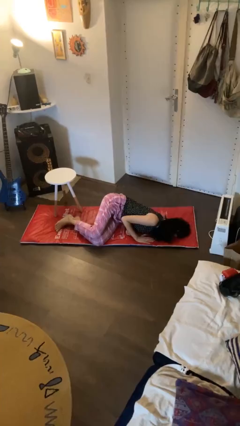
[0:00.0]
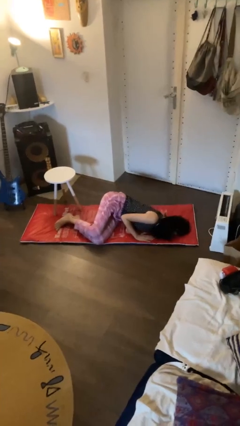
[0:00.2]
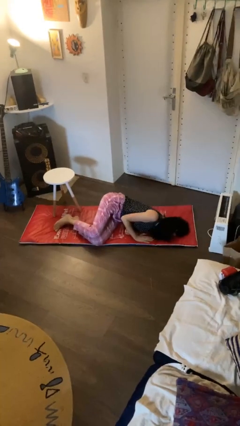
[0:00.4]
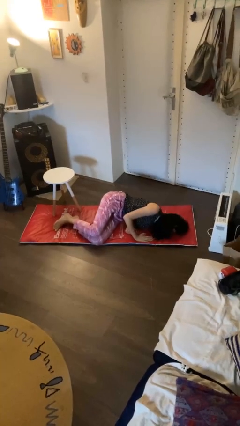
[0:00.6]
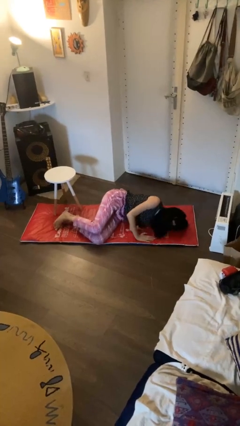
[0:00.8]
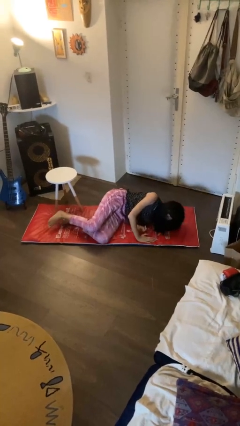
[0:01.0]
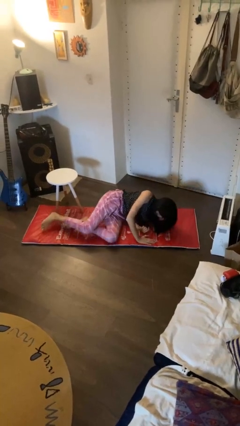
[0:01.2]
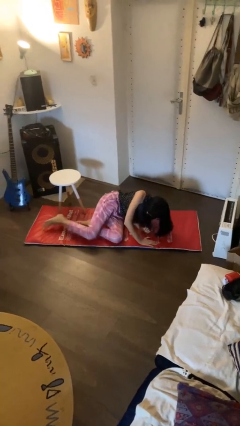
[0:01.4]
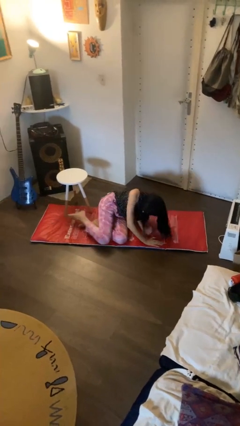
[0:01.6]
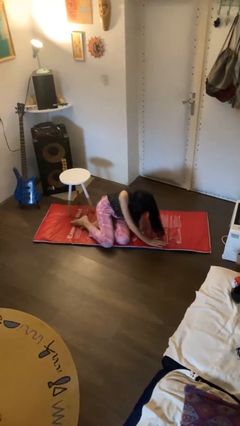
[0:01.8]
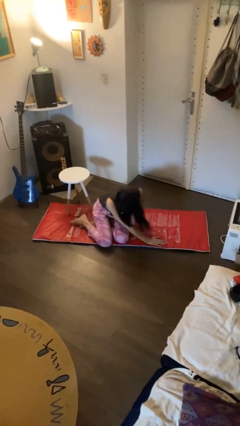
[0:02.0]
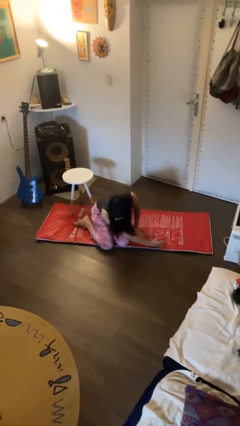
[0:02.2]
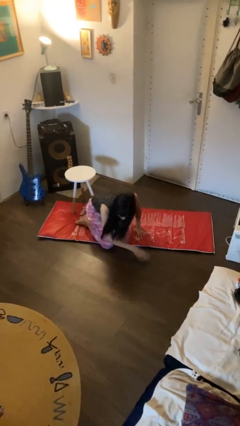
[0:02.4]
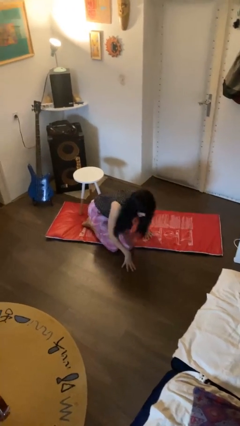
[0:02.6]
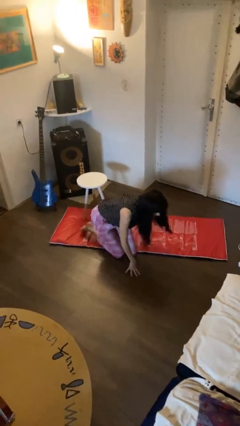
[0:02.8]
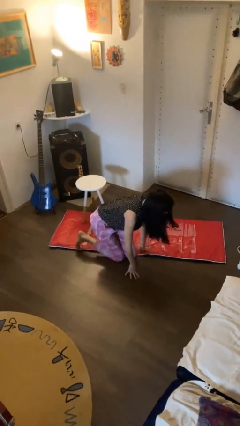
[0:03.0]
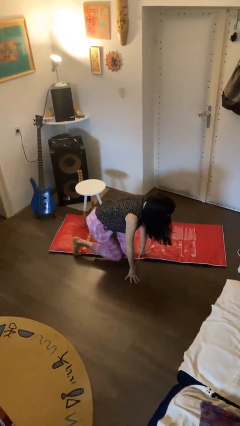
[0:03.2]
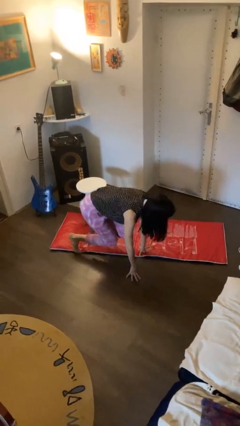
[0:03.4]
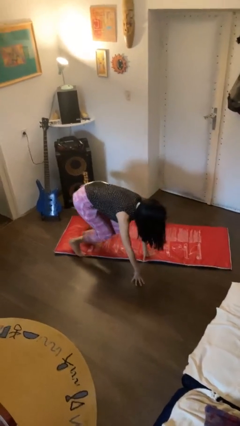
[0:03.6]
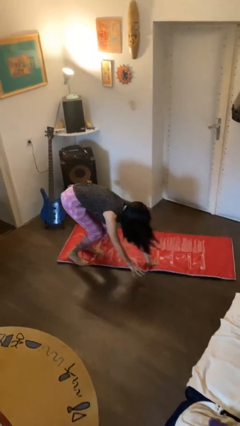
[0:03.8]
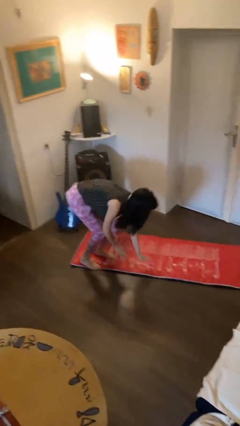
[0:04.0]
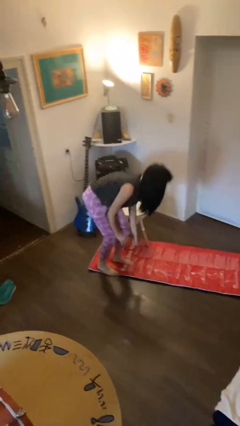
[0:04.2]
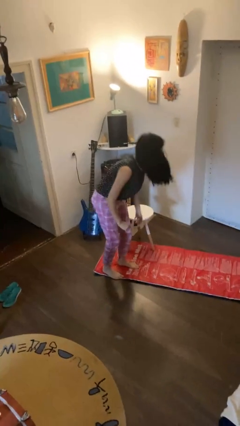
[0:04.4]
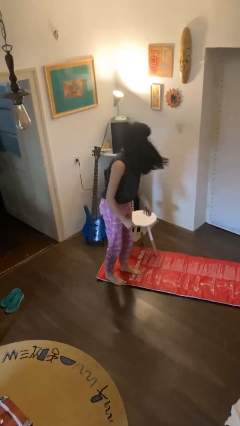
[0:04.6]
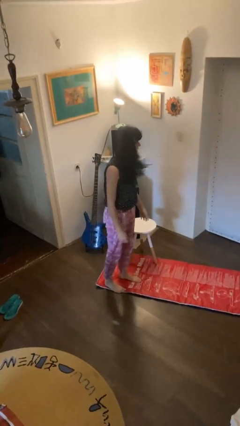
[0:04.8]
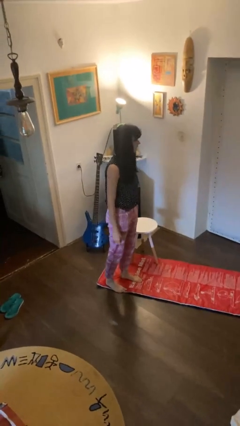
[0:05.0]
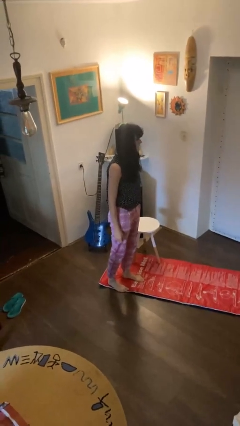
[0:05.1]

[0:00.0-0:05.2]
person stands up from floor

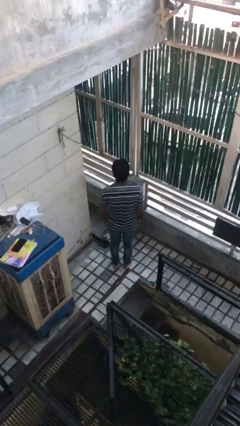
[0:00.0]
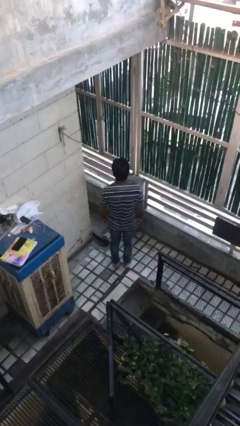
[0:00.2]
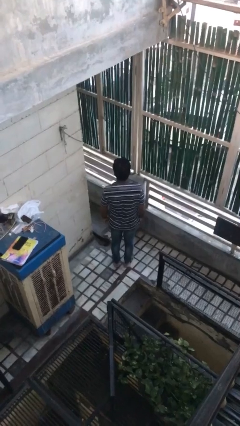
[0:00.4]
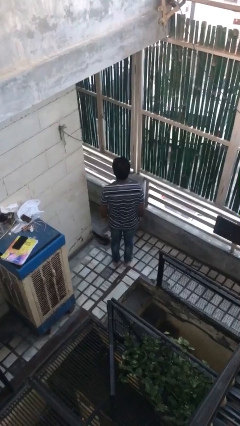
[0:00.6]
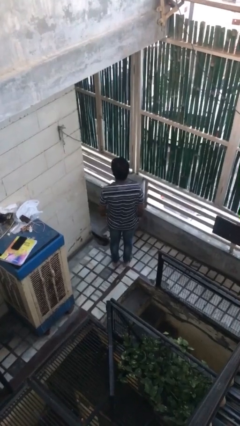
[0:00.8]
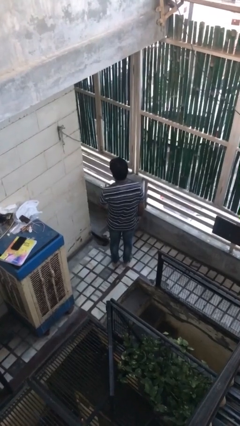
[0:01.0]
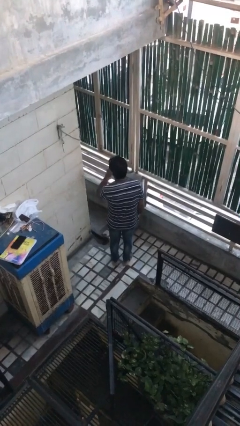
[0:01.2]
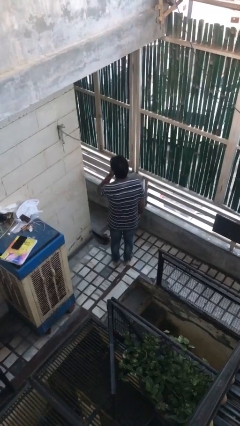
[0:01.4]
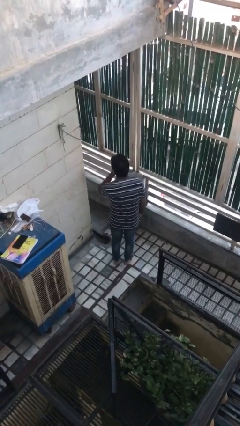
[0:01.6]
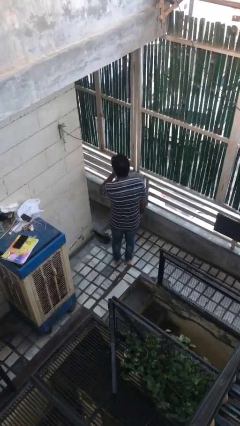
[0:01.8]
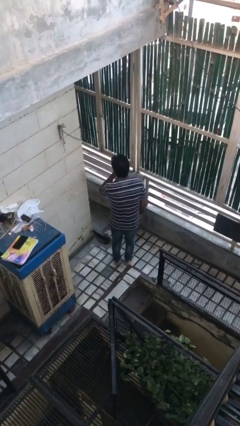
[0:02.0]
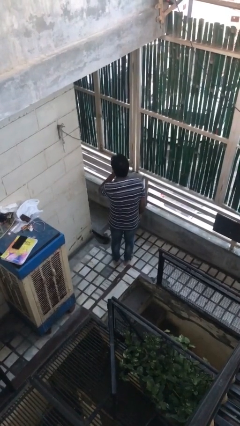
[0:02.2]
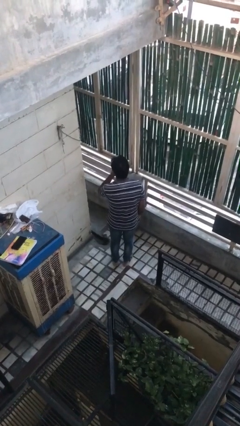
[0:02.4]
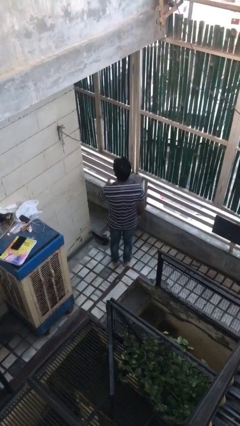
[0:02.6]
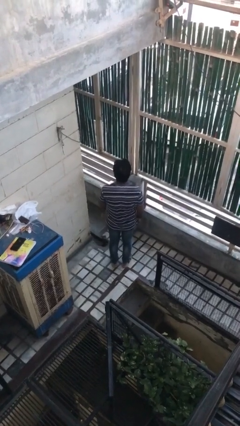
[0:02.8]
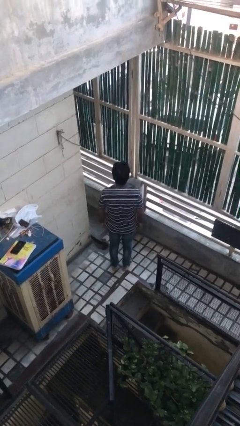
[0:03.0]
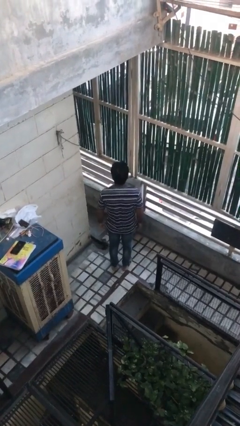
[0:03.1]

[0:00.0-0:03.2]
person gestures be quiet

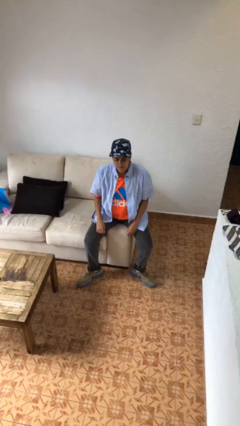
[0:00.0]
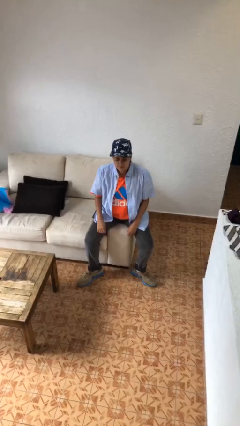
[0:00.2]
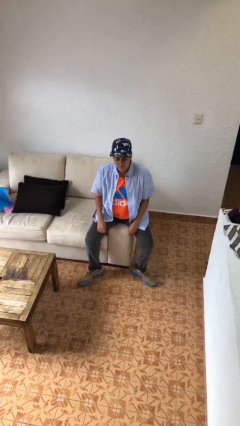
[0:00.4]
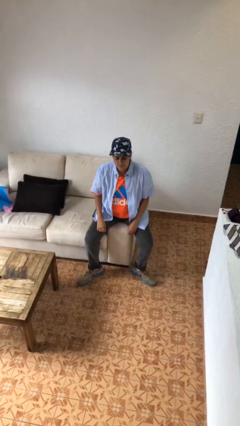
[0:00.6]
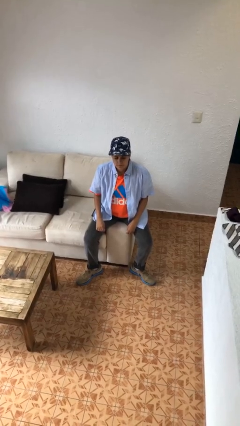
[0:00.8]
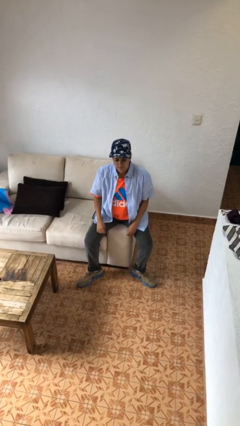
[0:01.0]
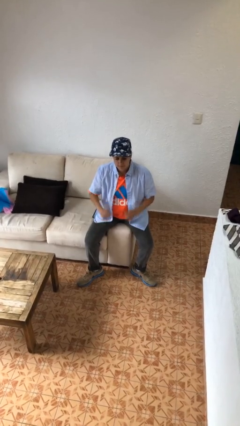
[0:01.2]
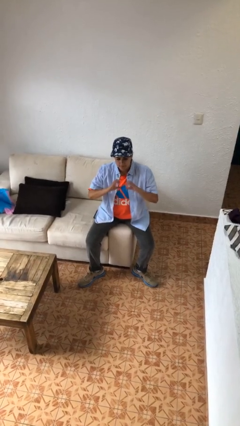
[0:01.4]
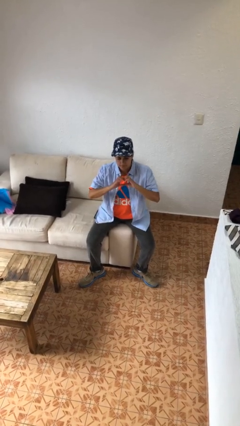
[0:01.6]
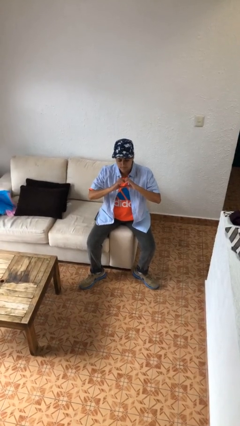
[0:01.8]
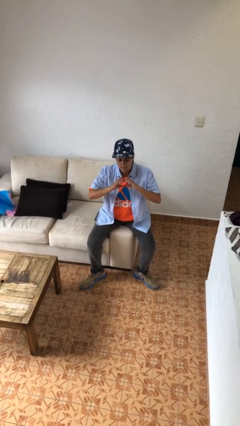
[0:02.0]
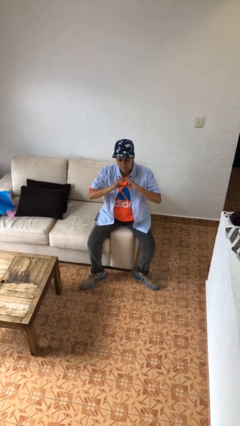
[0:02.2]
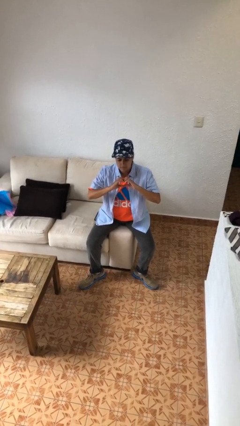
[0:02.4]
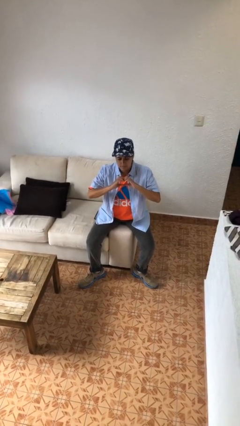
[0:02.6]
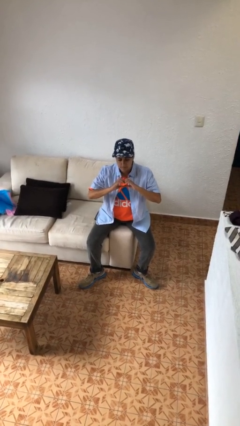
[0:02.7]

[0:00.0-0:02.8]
person gestures heart

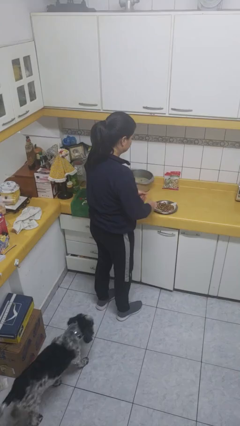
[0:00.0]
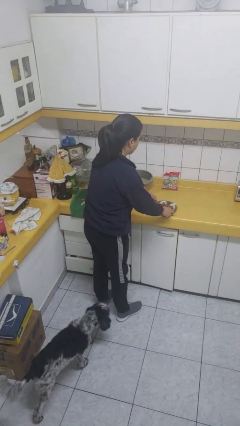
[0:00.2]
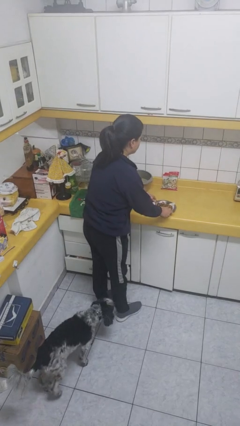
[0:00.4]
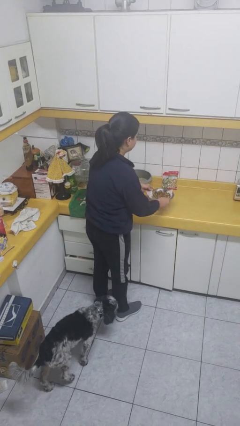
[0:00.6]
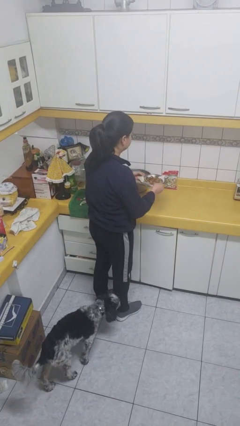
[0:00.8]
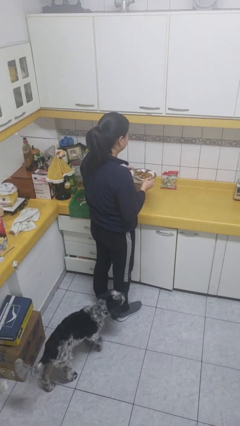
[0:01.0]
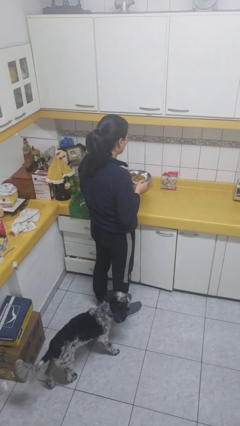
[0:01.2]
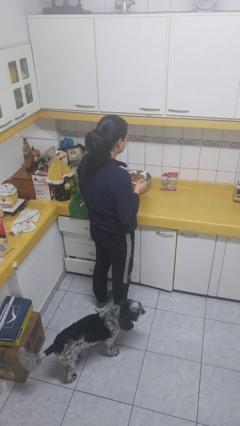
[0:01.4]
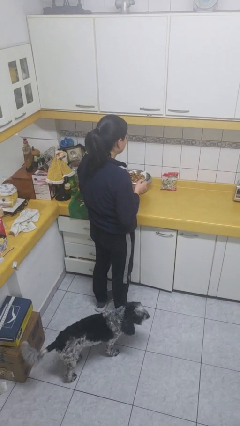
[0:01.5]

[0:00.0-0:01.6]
person picks up object from countertop

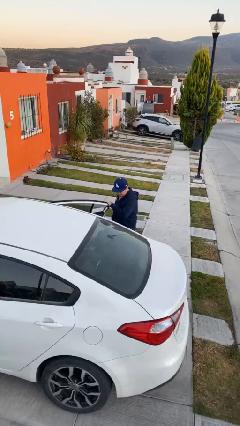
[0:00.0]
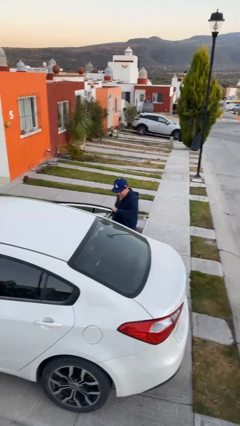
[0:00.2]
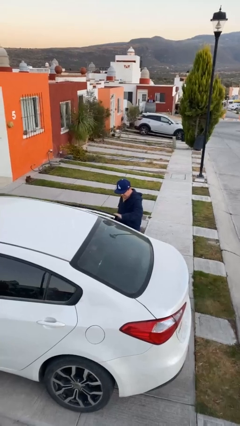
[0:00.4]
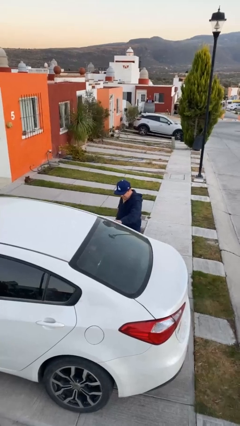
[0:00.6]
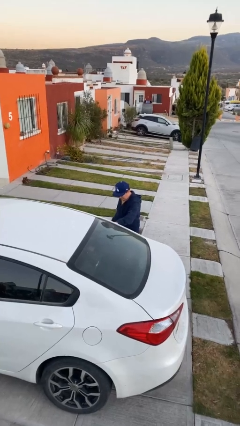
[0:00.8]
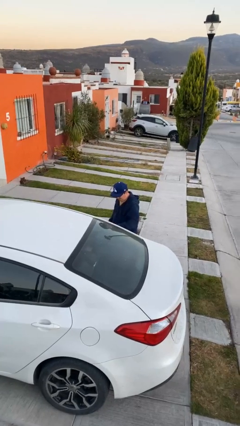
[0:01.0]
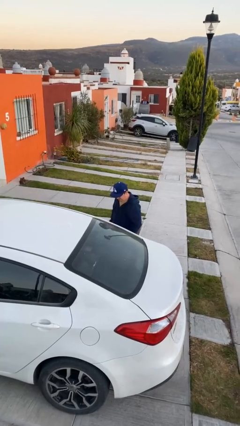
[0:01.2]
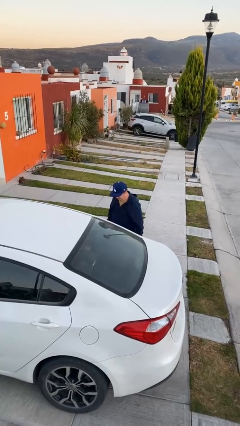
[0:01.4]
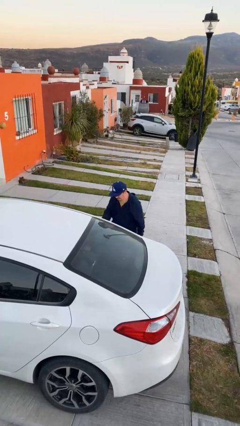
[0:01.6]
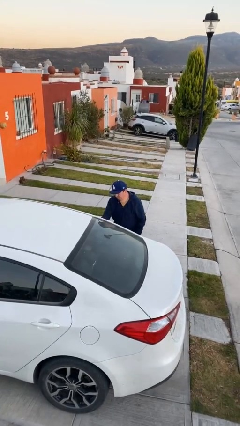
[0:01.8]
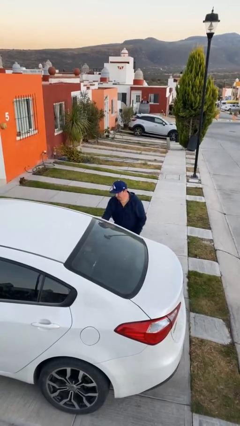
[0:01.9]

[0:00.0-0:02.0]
person closes car door

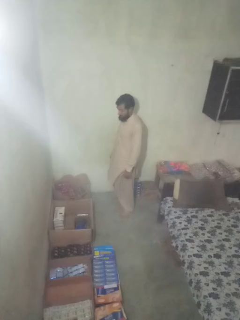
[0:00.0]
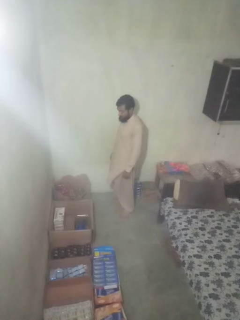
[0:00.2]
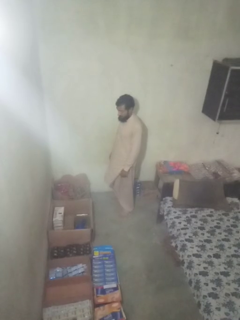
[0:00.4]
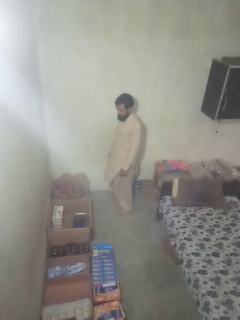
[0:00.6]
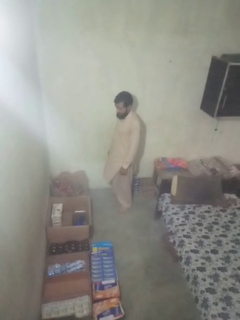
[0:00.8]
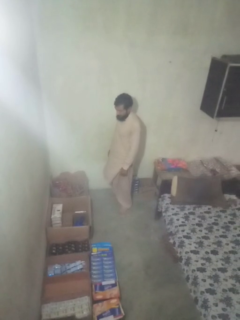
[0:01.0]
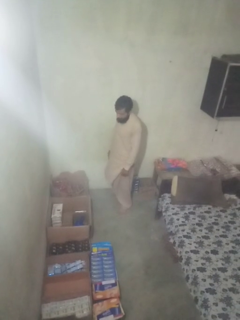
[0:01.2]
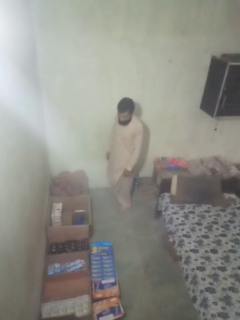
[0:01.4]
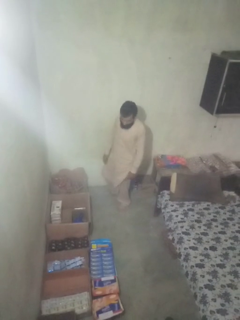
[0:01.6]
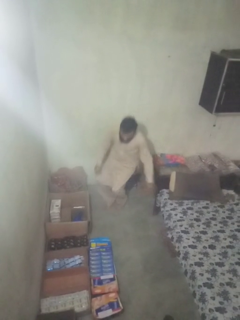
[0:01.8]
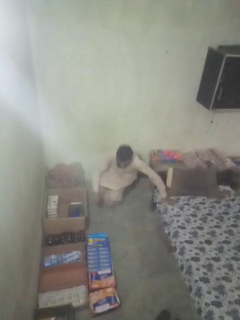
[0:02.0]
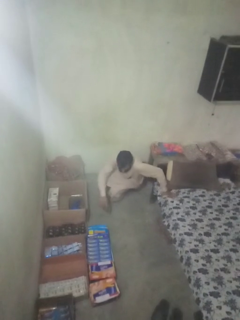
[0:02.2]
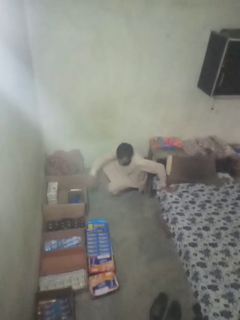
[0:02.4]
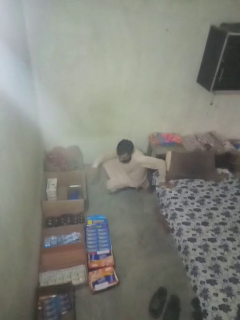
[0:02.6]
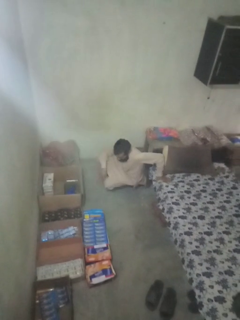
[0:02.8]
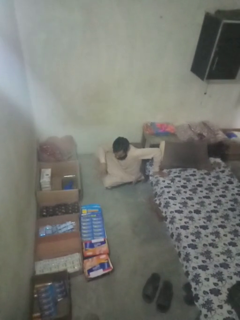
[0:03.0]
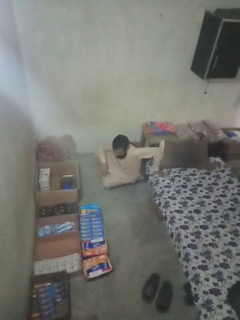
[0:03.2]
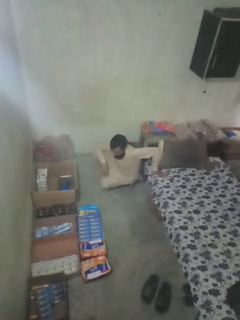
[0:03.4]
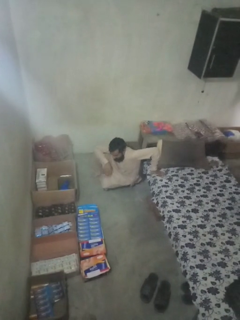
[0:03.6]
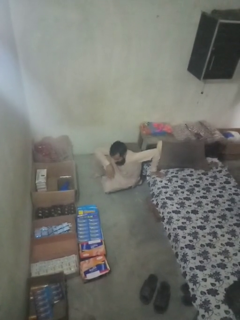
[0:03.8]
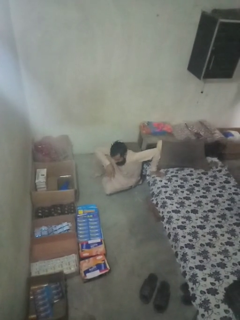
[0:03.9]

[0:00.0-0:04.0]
person trips on object on floor
